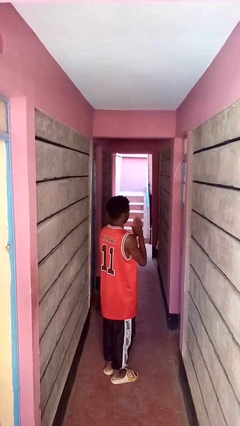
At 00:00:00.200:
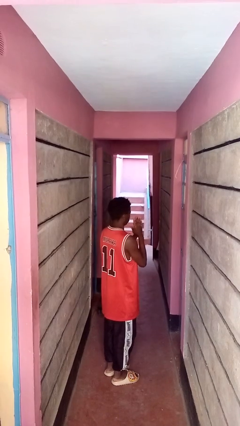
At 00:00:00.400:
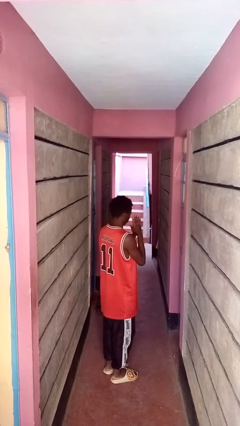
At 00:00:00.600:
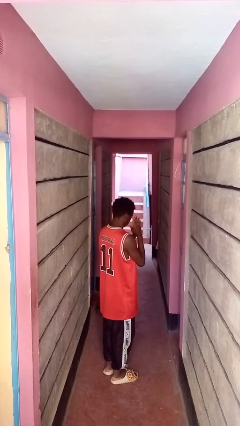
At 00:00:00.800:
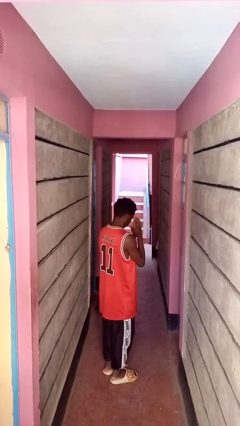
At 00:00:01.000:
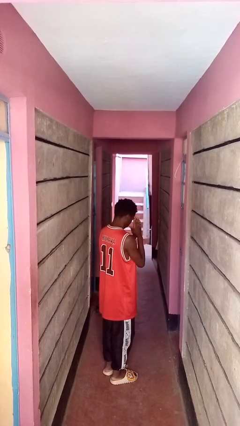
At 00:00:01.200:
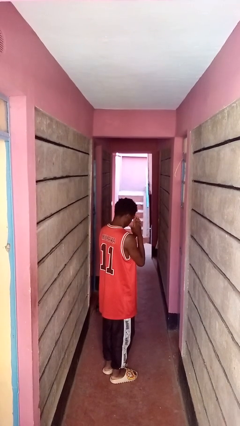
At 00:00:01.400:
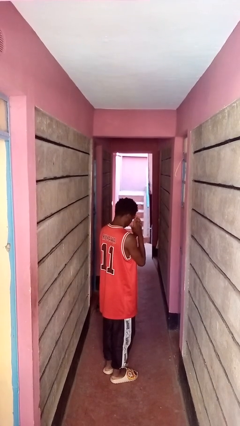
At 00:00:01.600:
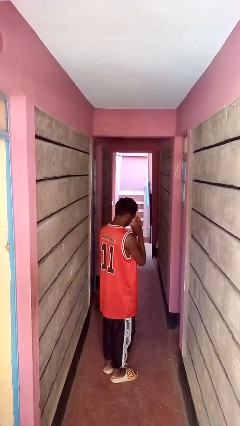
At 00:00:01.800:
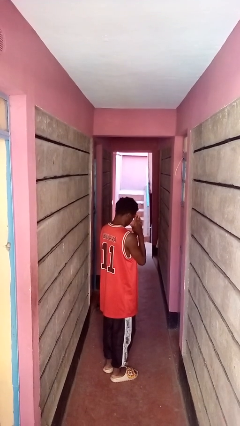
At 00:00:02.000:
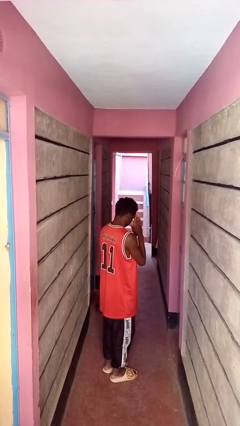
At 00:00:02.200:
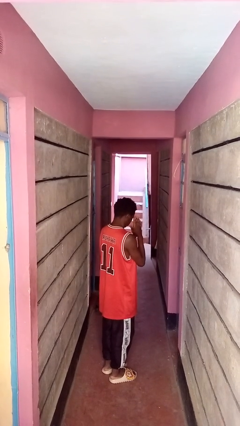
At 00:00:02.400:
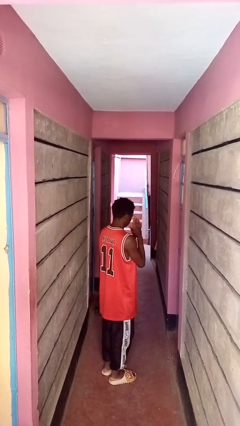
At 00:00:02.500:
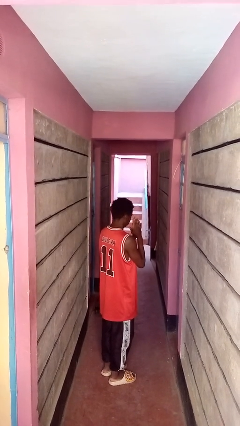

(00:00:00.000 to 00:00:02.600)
person prays

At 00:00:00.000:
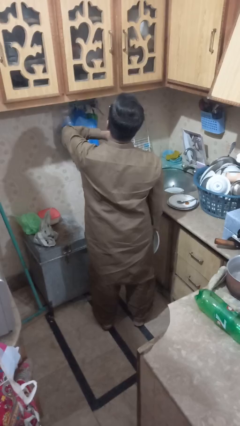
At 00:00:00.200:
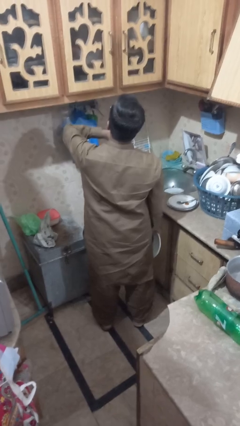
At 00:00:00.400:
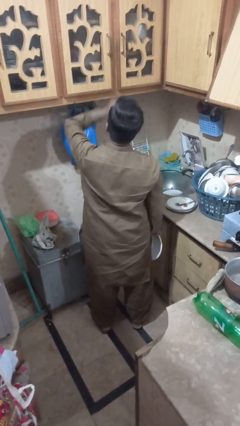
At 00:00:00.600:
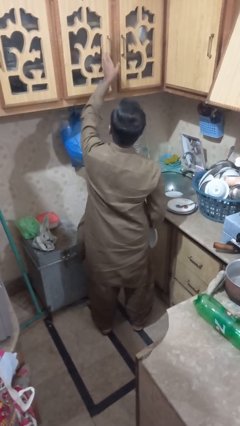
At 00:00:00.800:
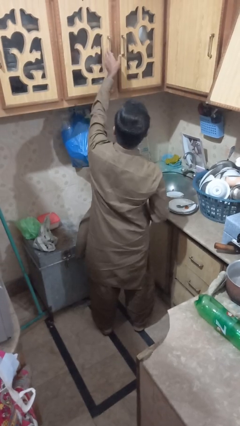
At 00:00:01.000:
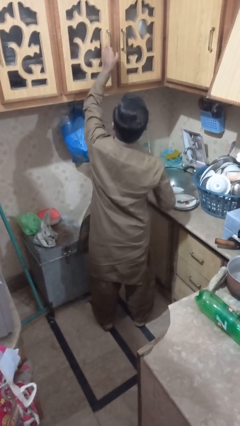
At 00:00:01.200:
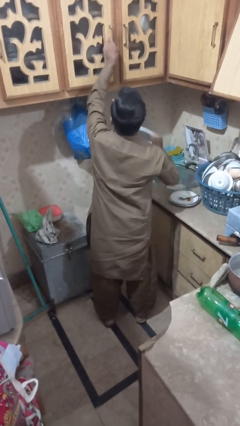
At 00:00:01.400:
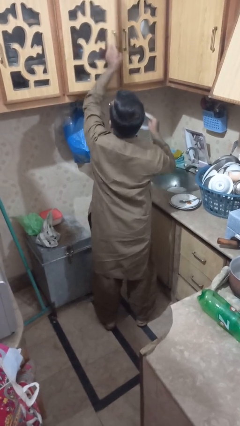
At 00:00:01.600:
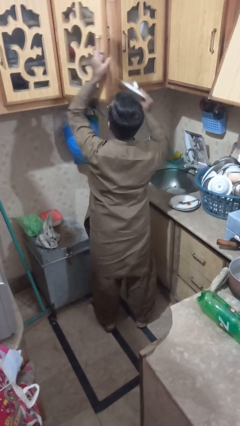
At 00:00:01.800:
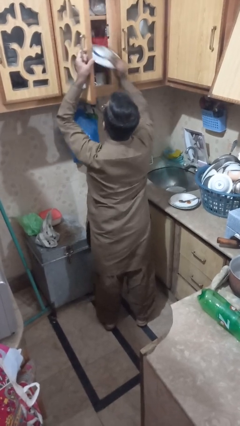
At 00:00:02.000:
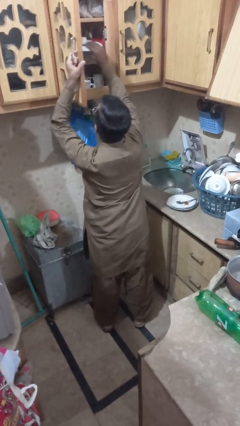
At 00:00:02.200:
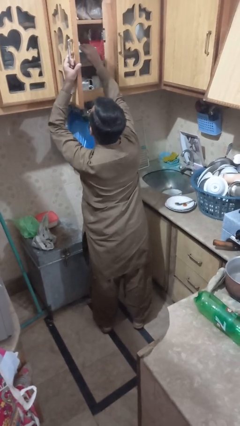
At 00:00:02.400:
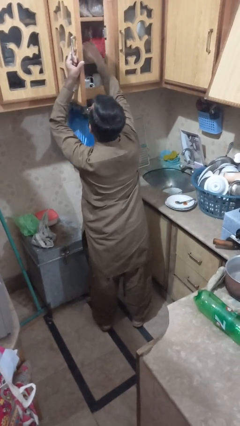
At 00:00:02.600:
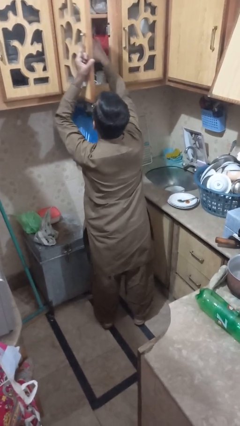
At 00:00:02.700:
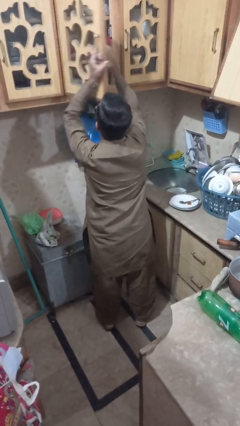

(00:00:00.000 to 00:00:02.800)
person puts object in cabinet

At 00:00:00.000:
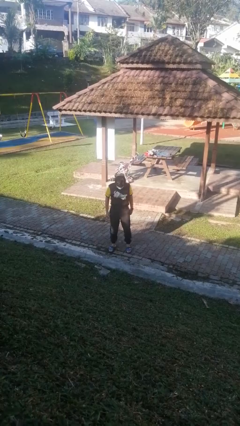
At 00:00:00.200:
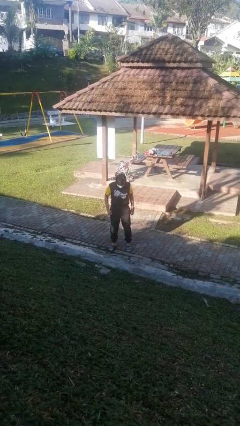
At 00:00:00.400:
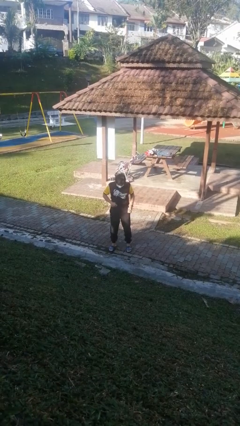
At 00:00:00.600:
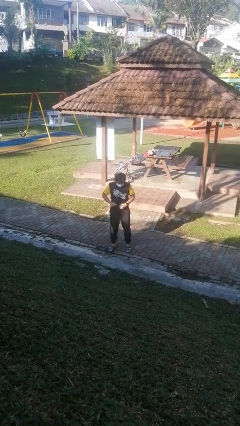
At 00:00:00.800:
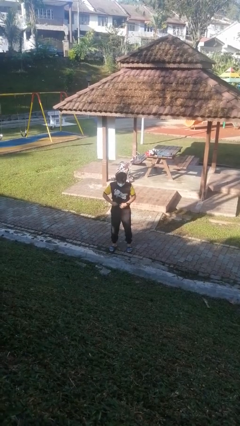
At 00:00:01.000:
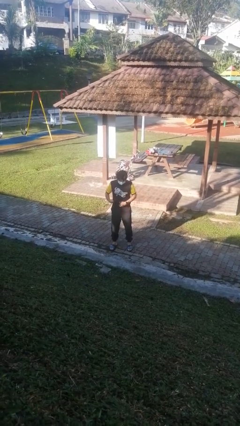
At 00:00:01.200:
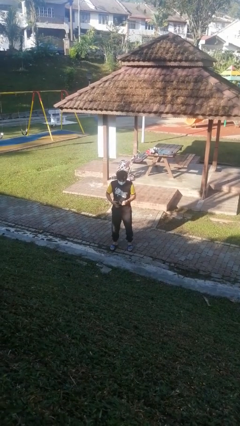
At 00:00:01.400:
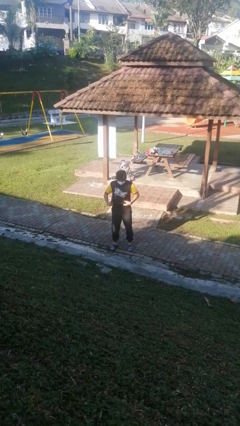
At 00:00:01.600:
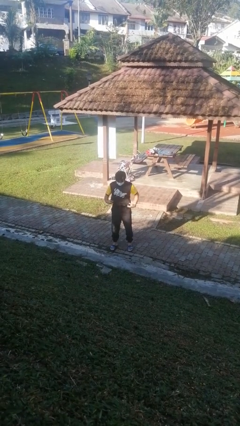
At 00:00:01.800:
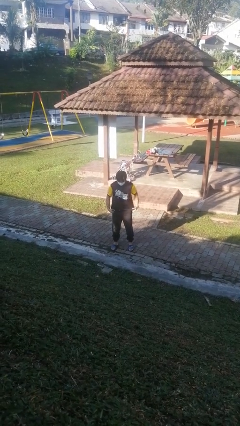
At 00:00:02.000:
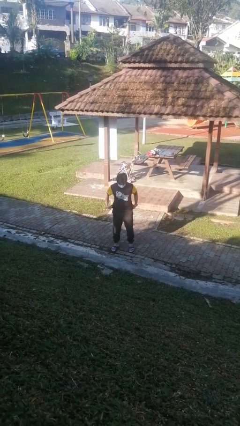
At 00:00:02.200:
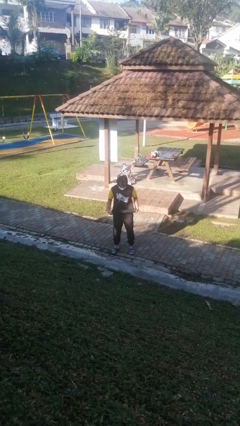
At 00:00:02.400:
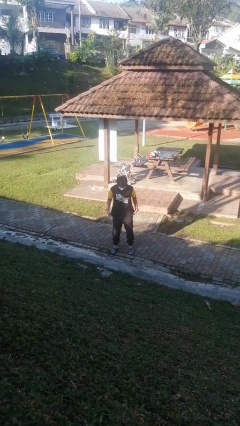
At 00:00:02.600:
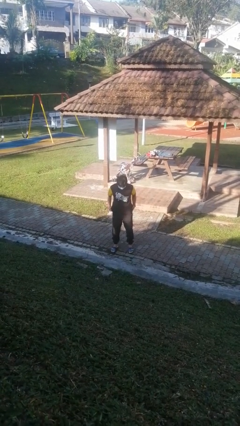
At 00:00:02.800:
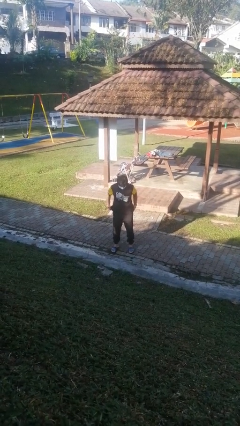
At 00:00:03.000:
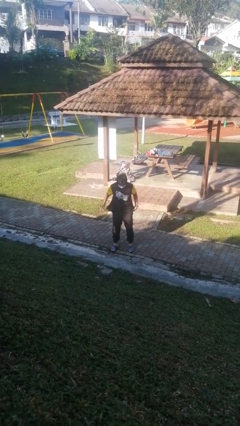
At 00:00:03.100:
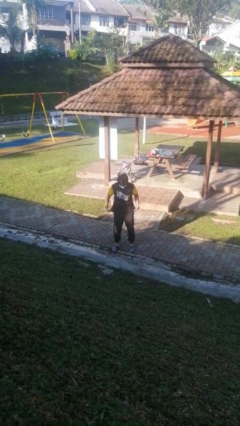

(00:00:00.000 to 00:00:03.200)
person untucks shirt

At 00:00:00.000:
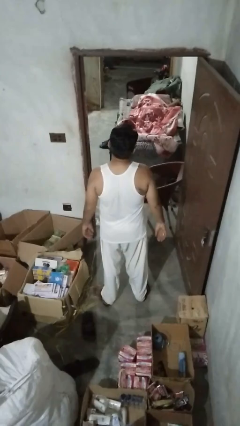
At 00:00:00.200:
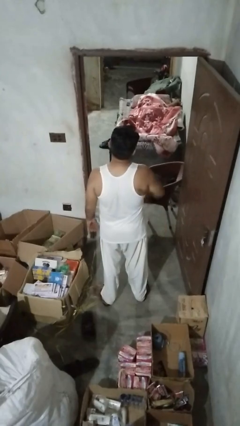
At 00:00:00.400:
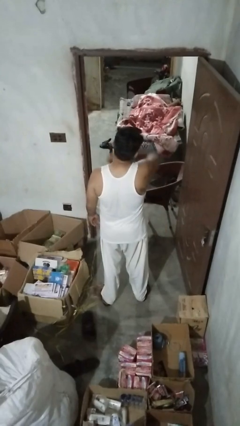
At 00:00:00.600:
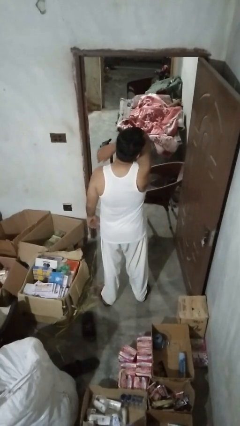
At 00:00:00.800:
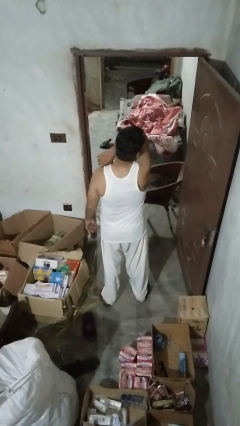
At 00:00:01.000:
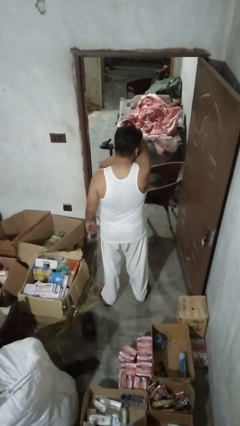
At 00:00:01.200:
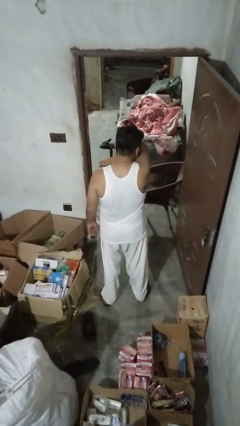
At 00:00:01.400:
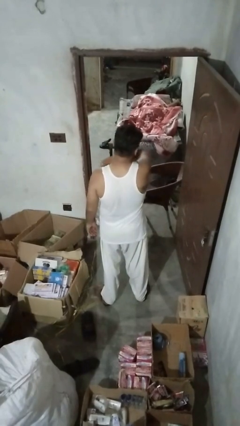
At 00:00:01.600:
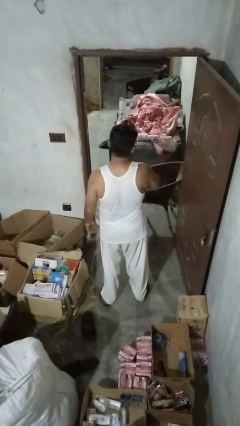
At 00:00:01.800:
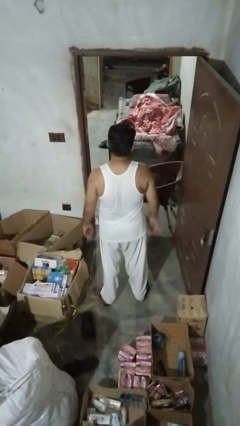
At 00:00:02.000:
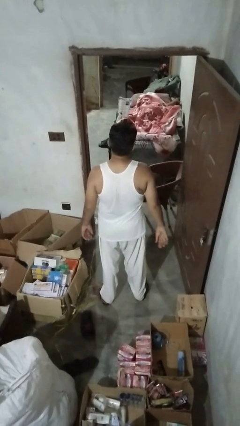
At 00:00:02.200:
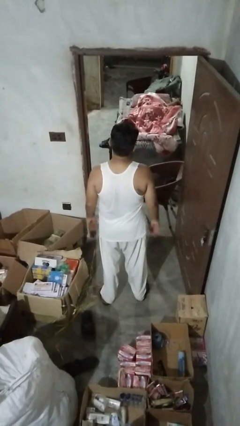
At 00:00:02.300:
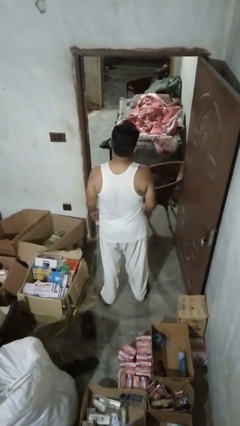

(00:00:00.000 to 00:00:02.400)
person sneezes into arm

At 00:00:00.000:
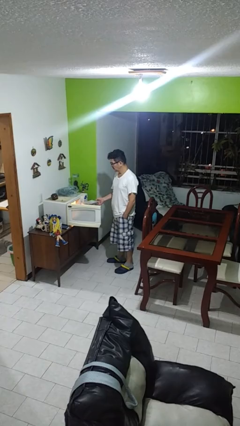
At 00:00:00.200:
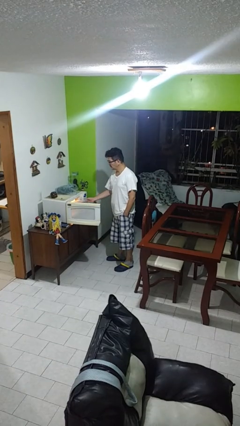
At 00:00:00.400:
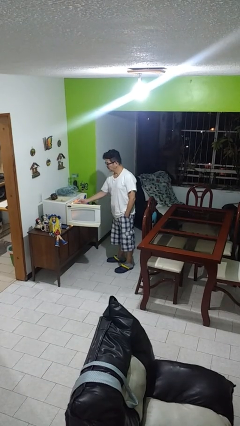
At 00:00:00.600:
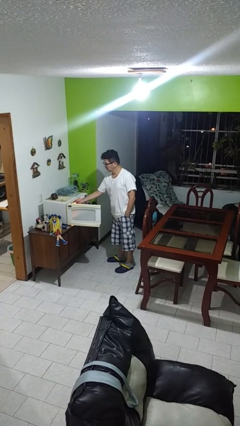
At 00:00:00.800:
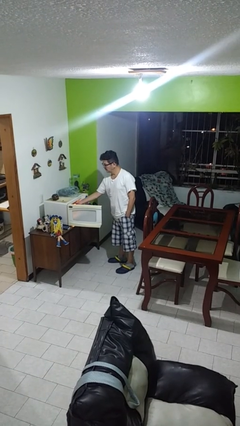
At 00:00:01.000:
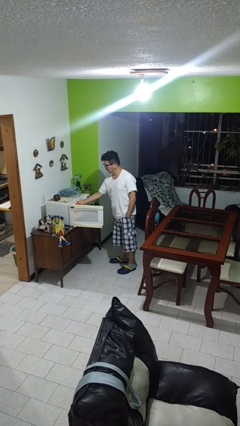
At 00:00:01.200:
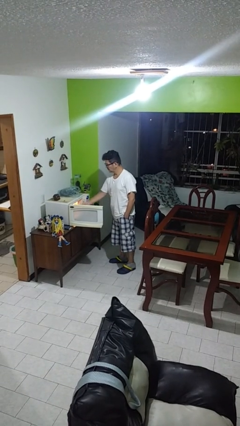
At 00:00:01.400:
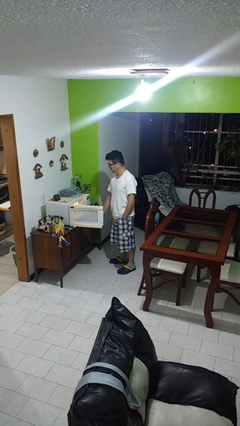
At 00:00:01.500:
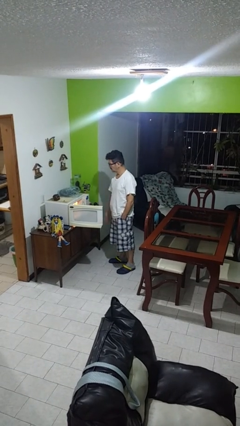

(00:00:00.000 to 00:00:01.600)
person puts object into microwave

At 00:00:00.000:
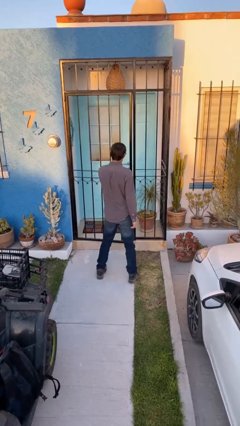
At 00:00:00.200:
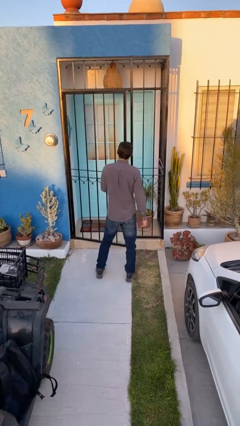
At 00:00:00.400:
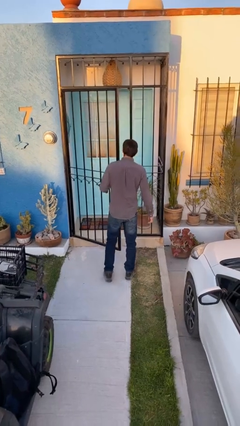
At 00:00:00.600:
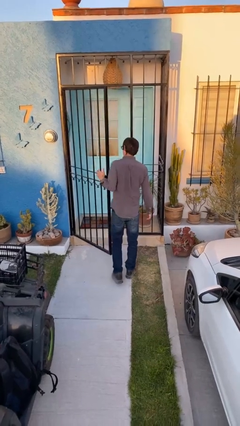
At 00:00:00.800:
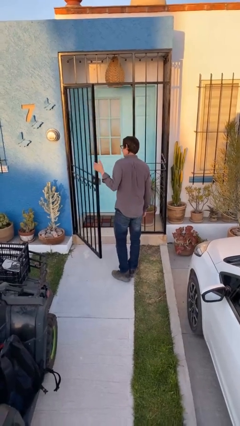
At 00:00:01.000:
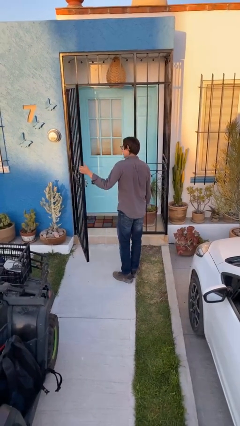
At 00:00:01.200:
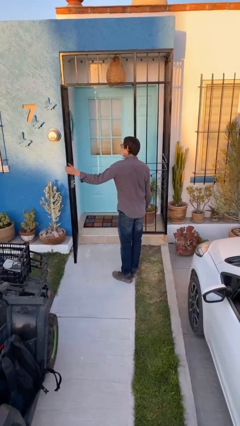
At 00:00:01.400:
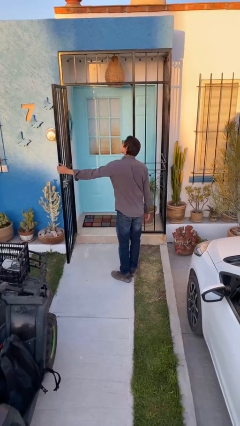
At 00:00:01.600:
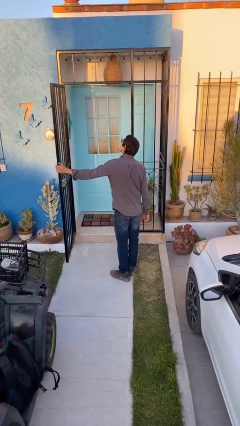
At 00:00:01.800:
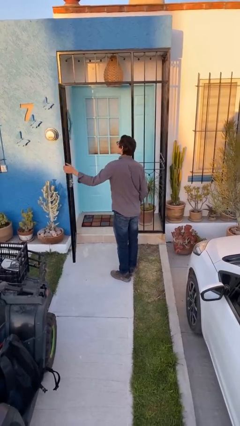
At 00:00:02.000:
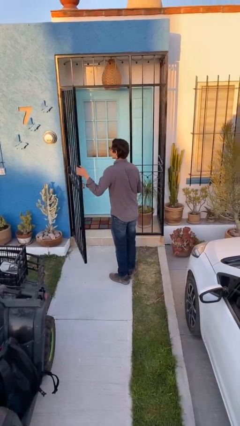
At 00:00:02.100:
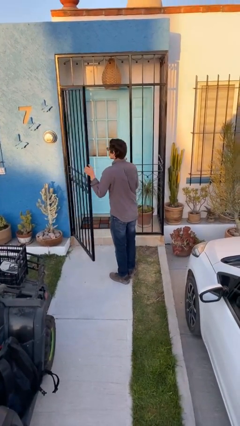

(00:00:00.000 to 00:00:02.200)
person opens facility door

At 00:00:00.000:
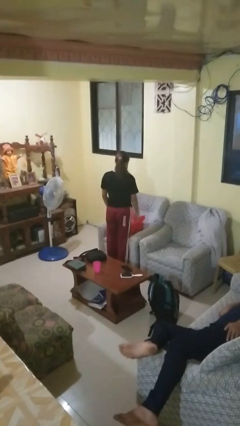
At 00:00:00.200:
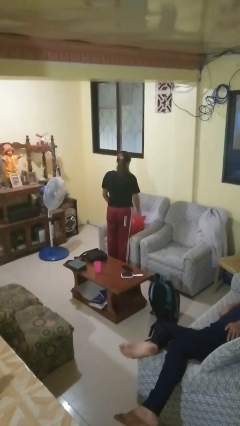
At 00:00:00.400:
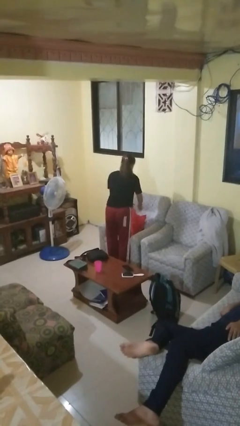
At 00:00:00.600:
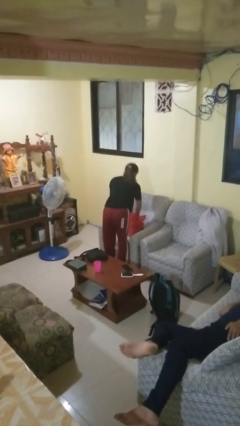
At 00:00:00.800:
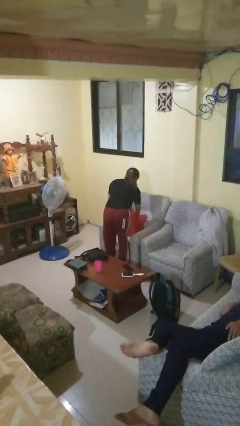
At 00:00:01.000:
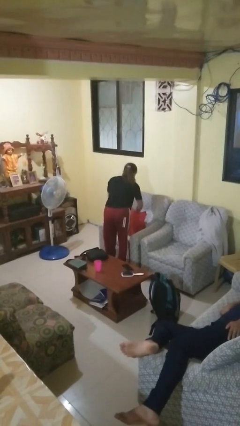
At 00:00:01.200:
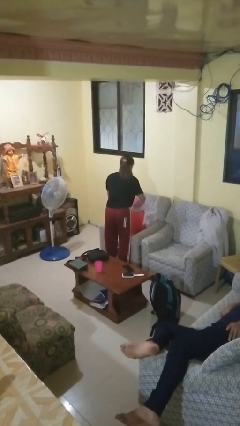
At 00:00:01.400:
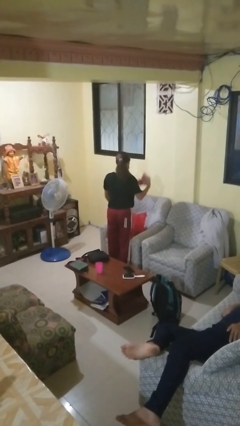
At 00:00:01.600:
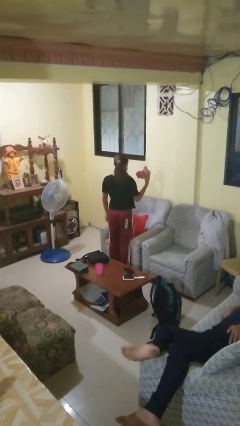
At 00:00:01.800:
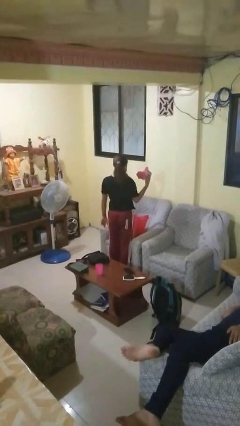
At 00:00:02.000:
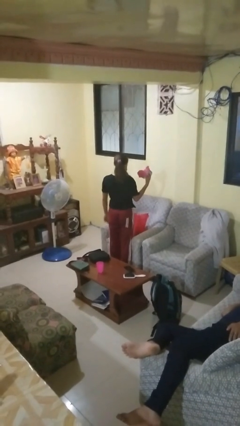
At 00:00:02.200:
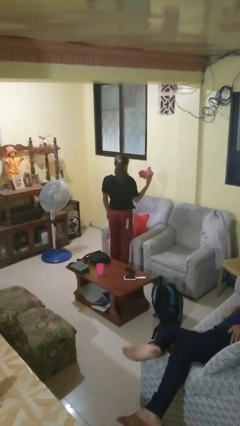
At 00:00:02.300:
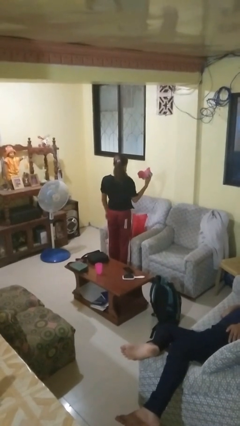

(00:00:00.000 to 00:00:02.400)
person takes object from bag
